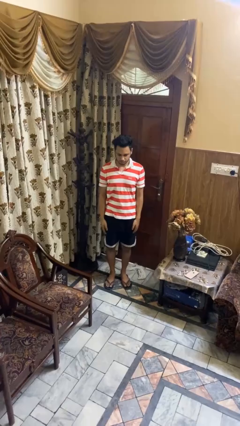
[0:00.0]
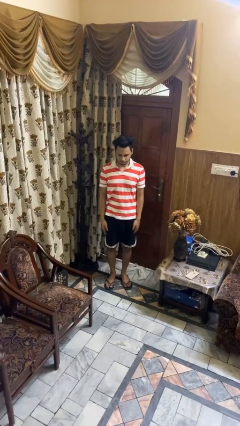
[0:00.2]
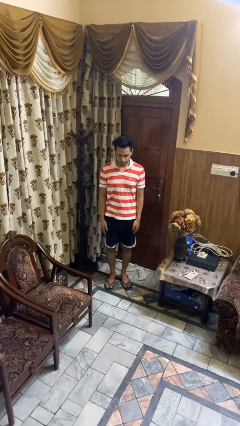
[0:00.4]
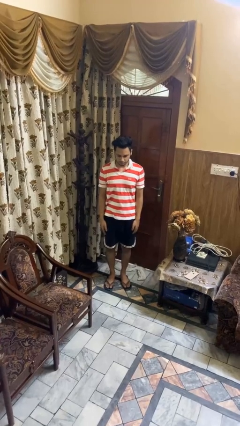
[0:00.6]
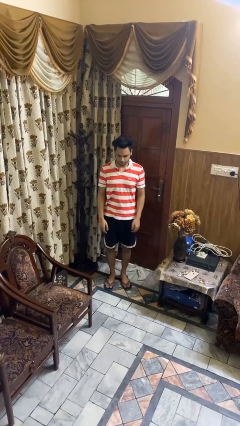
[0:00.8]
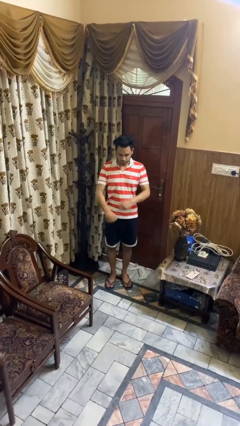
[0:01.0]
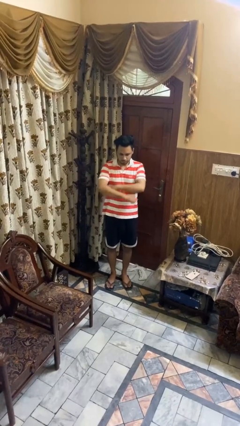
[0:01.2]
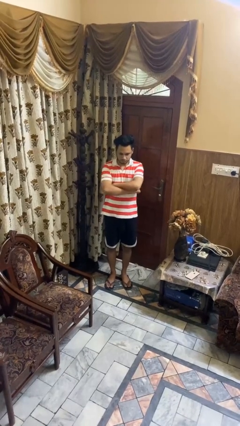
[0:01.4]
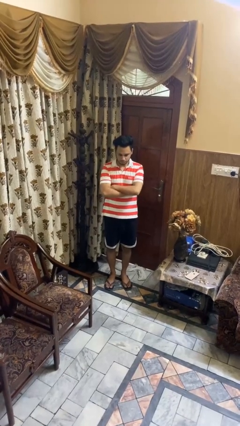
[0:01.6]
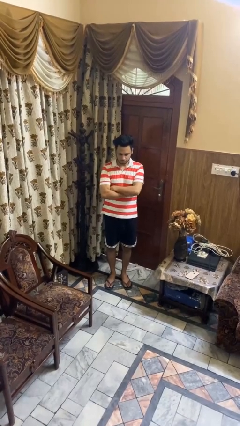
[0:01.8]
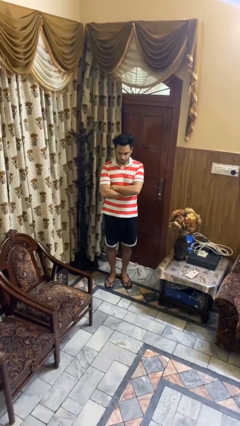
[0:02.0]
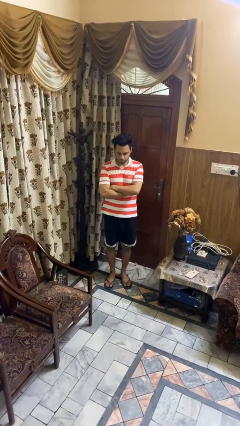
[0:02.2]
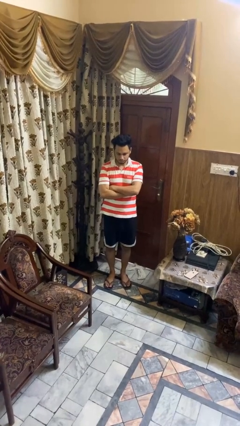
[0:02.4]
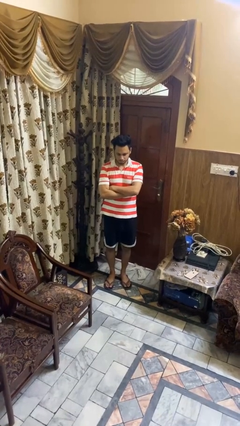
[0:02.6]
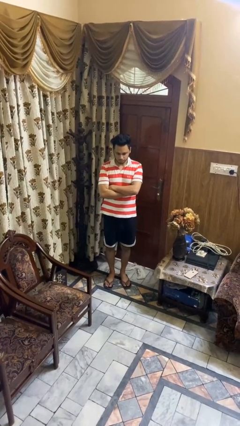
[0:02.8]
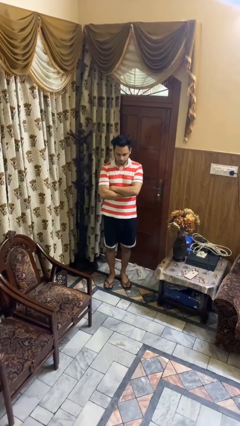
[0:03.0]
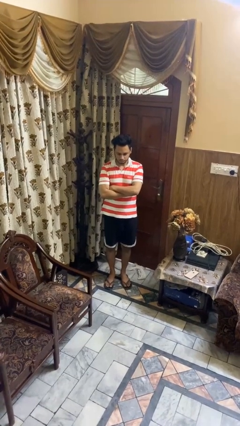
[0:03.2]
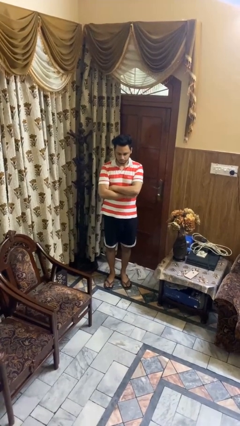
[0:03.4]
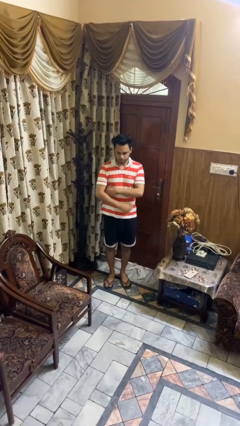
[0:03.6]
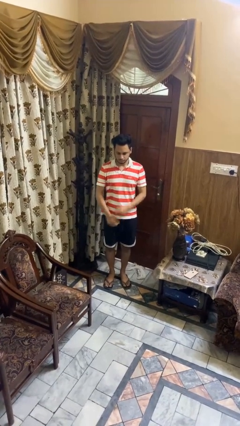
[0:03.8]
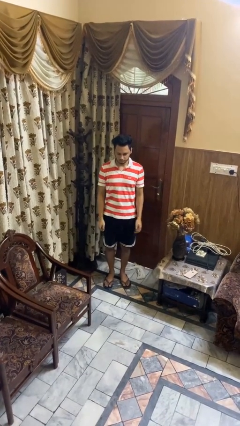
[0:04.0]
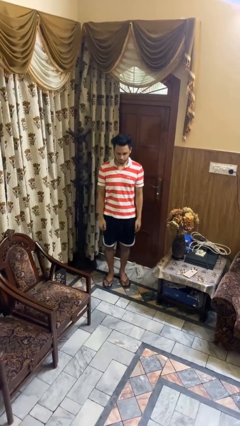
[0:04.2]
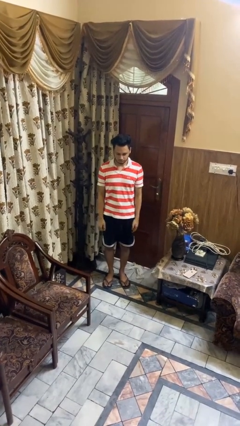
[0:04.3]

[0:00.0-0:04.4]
person crosses arms

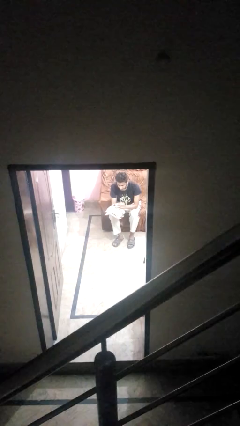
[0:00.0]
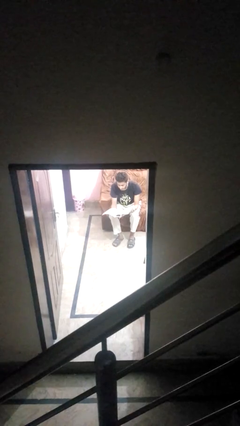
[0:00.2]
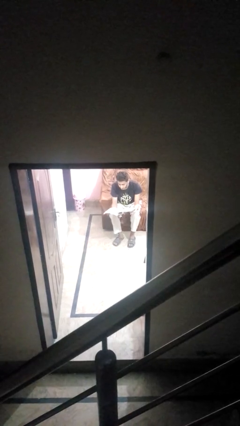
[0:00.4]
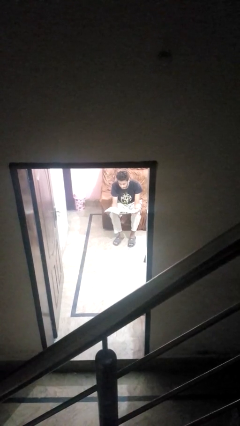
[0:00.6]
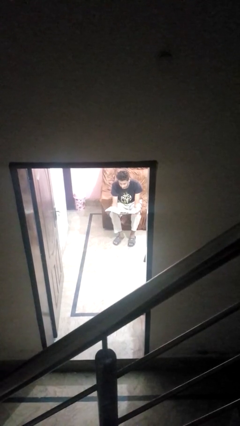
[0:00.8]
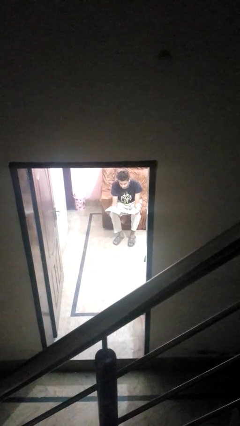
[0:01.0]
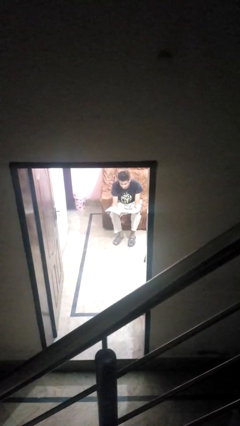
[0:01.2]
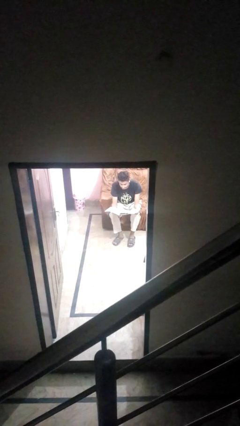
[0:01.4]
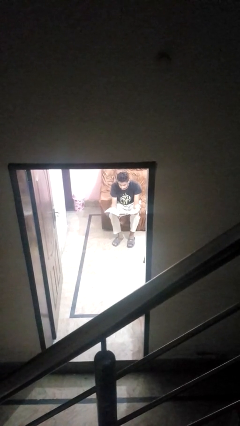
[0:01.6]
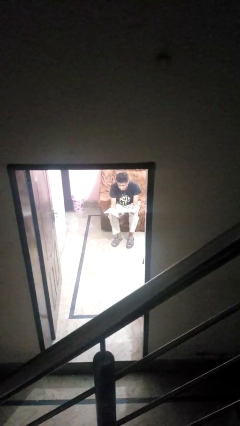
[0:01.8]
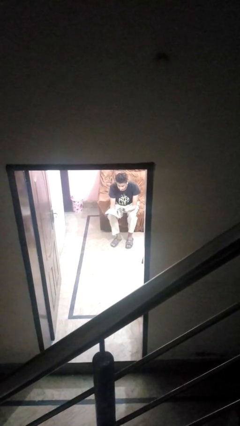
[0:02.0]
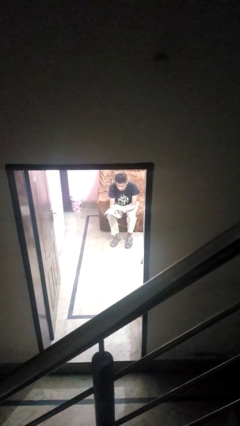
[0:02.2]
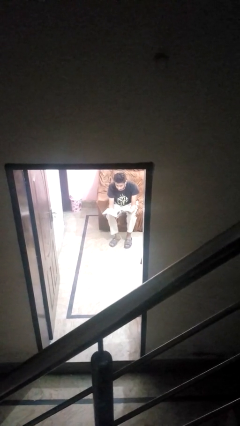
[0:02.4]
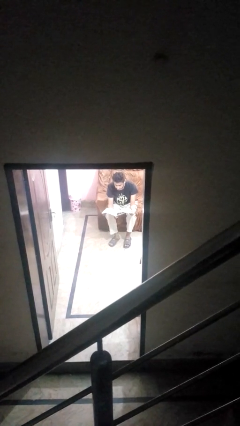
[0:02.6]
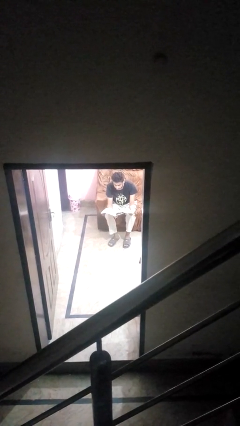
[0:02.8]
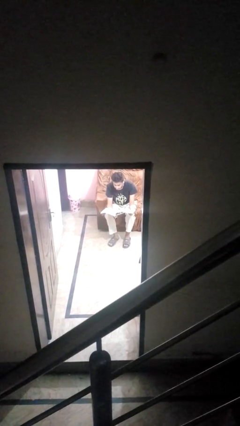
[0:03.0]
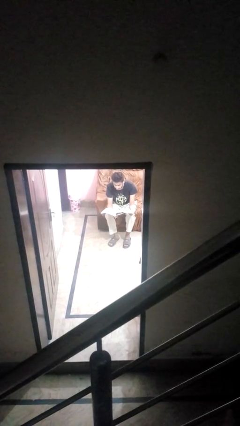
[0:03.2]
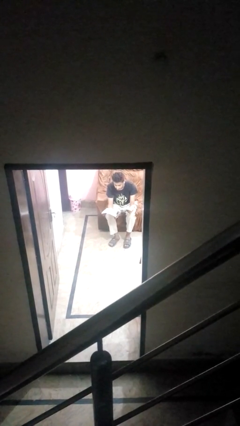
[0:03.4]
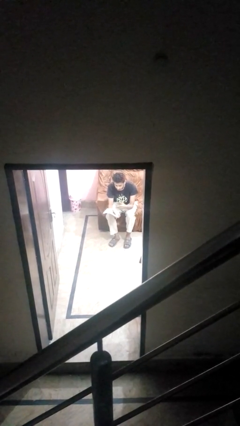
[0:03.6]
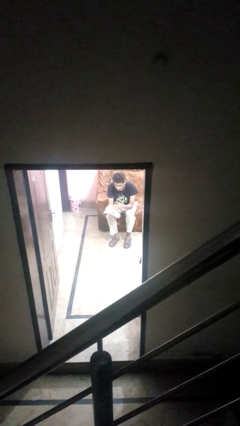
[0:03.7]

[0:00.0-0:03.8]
person reads magazine

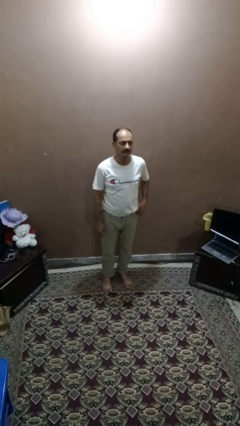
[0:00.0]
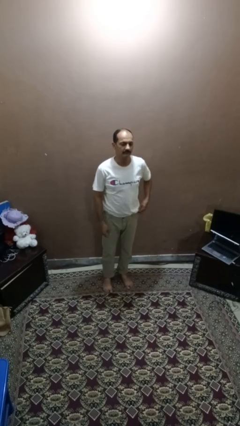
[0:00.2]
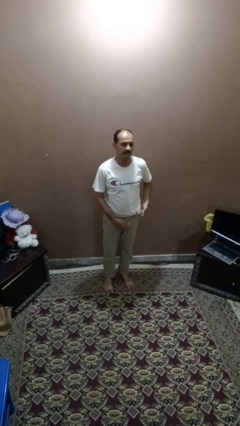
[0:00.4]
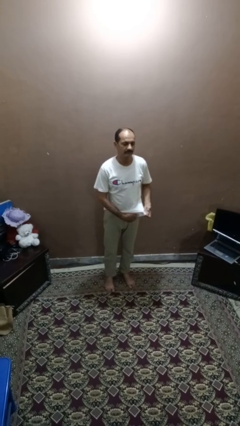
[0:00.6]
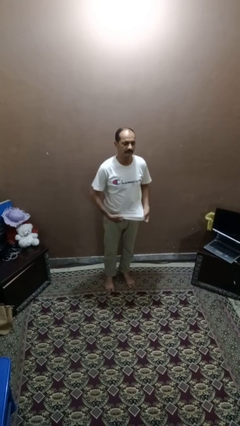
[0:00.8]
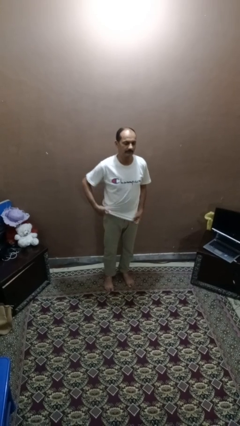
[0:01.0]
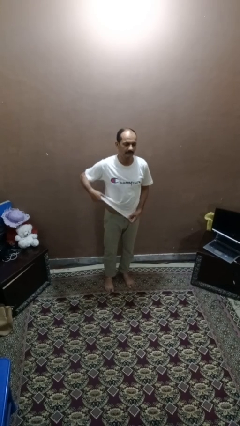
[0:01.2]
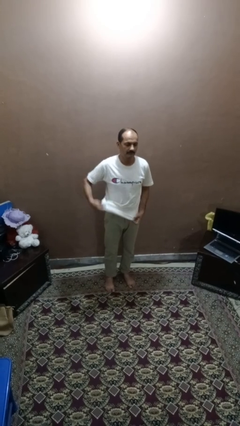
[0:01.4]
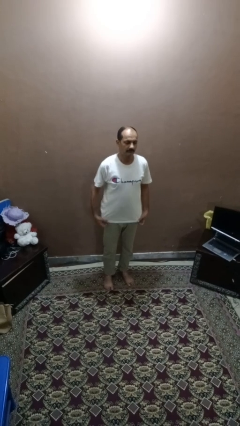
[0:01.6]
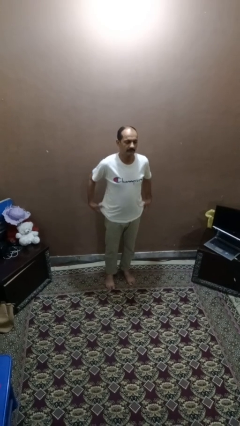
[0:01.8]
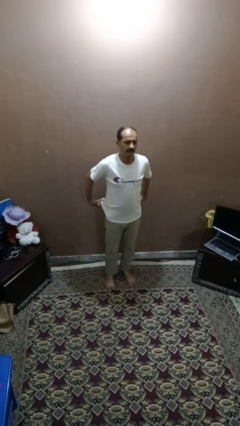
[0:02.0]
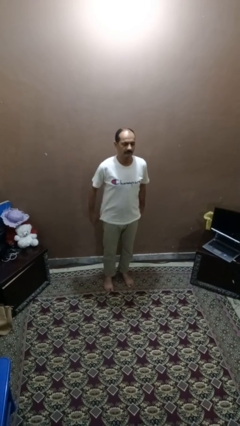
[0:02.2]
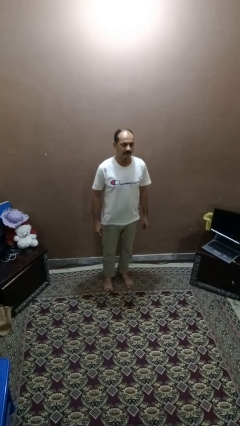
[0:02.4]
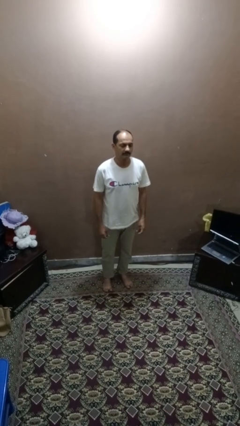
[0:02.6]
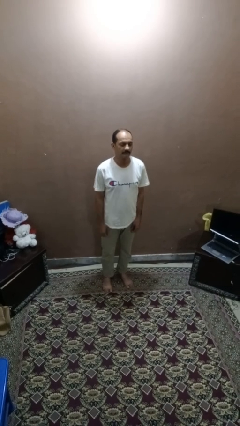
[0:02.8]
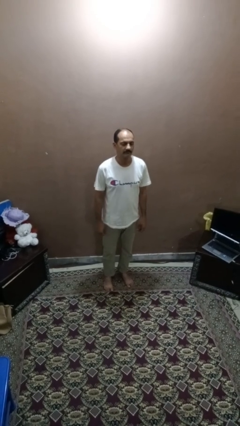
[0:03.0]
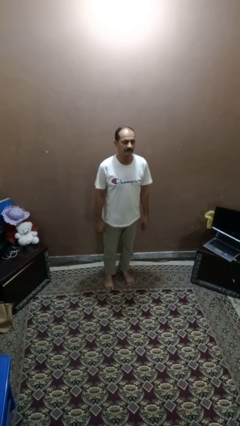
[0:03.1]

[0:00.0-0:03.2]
person untucks shirt

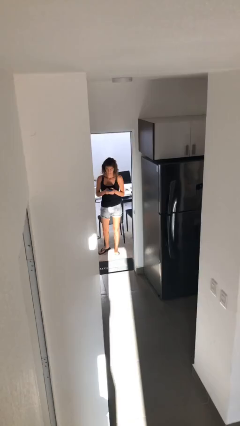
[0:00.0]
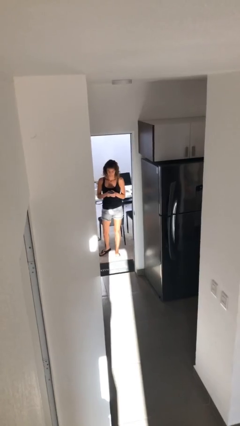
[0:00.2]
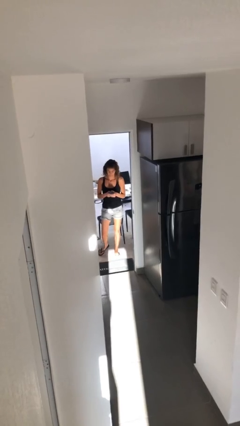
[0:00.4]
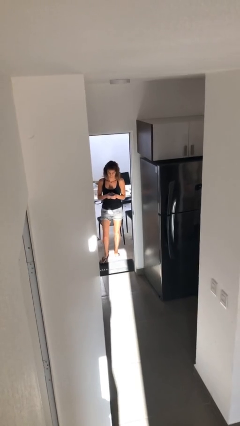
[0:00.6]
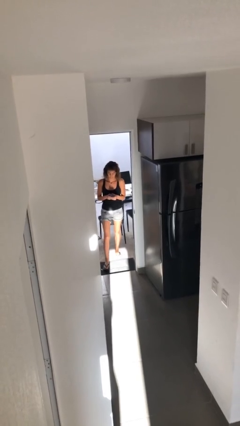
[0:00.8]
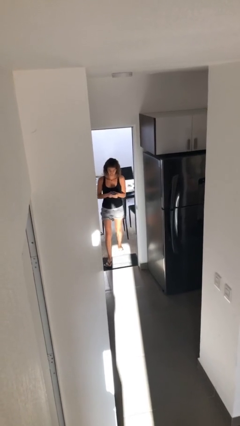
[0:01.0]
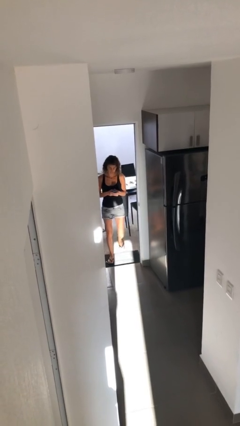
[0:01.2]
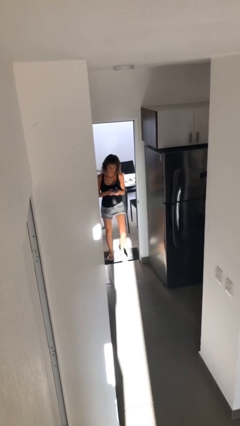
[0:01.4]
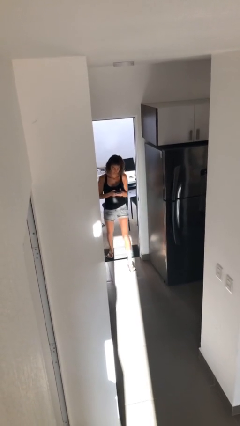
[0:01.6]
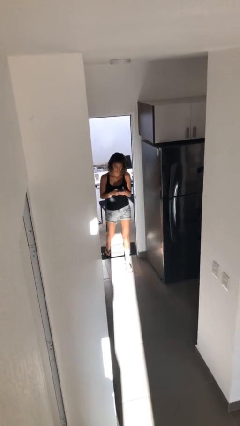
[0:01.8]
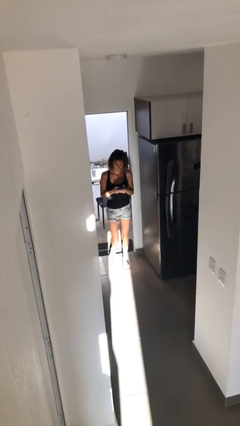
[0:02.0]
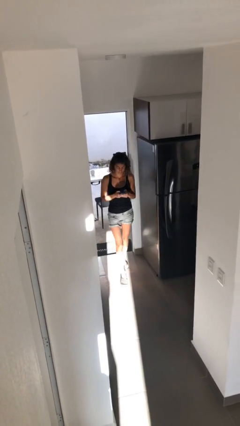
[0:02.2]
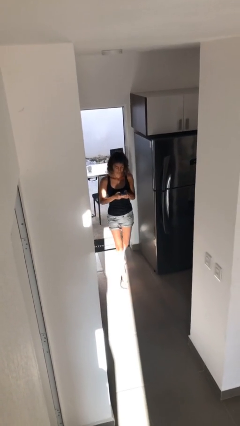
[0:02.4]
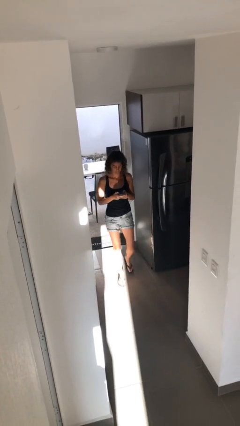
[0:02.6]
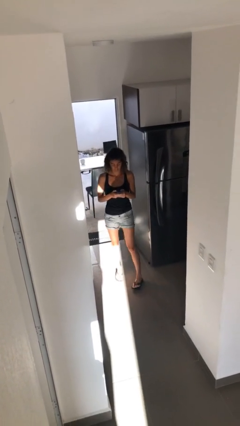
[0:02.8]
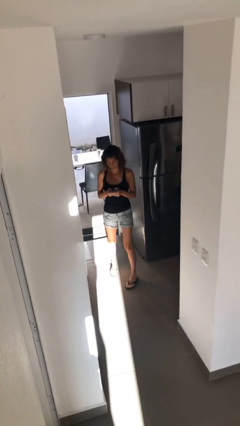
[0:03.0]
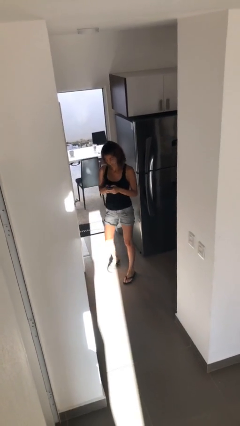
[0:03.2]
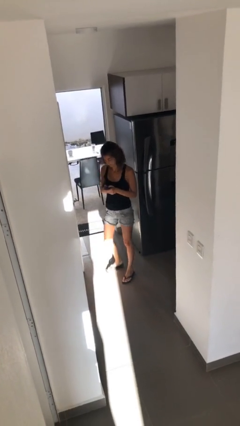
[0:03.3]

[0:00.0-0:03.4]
person enters scene through structure

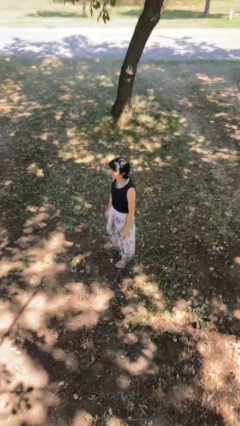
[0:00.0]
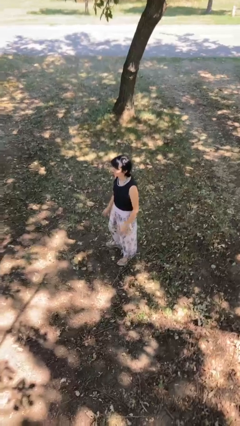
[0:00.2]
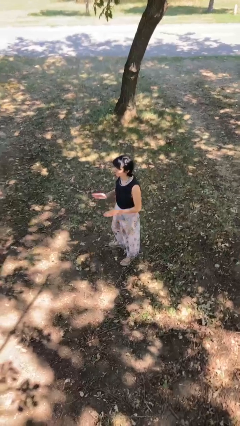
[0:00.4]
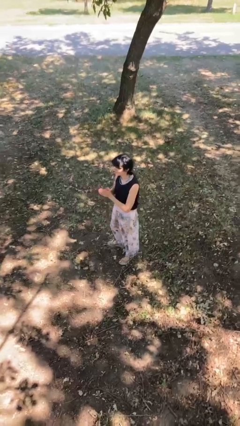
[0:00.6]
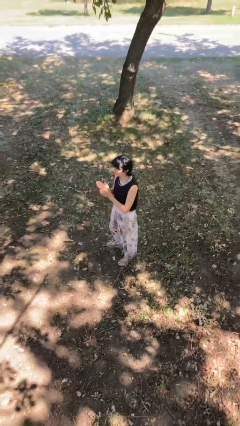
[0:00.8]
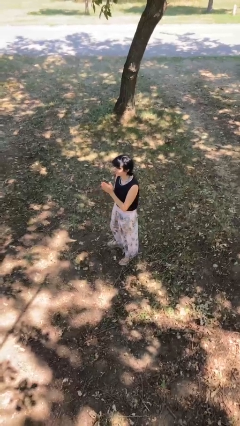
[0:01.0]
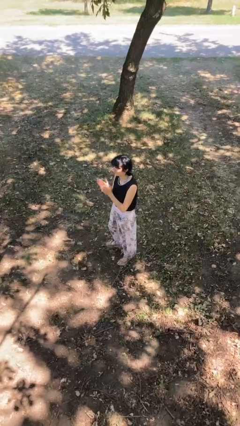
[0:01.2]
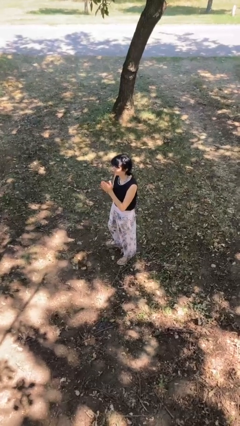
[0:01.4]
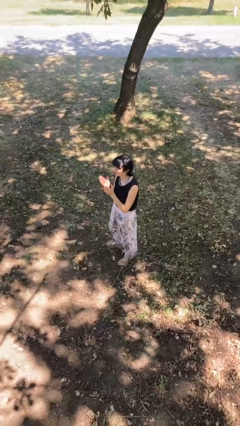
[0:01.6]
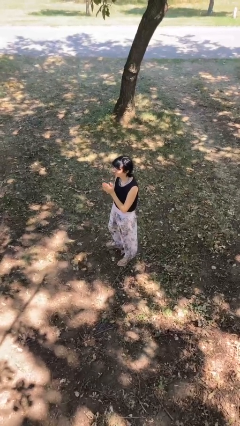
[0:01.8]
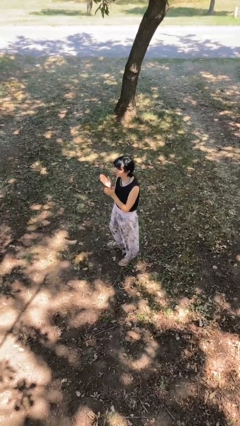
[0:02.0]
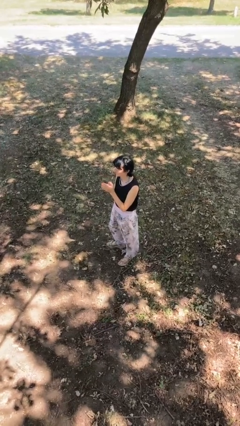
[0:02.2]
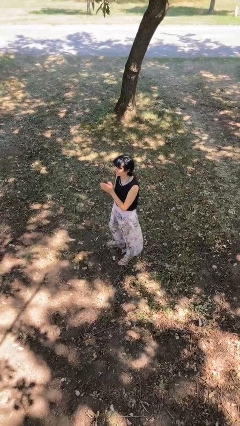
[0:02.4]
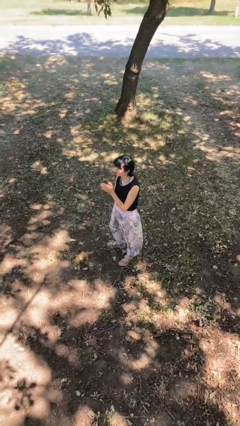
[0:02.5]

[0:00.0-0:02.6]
person claps hands

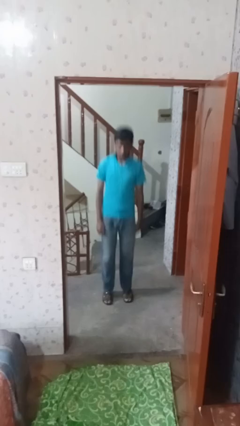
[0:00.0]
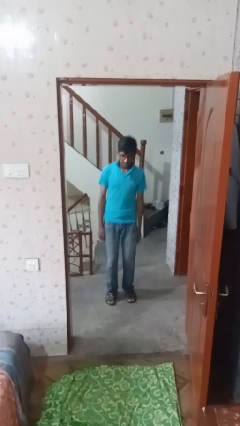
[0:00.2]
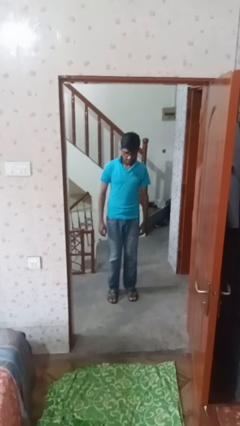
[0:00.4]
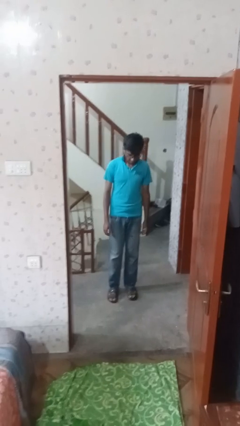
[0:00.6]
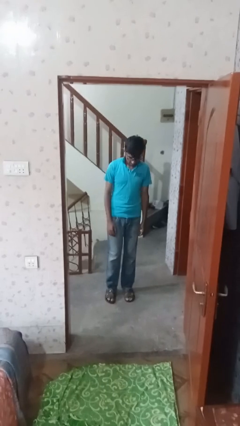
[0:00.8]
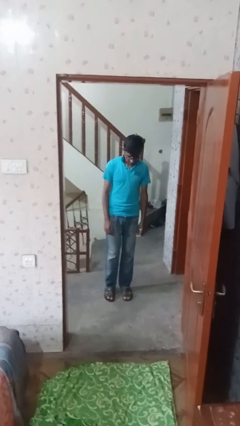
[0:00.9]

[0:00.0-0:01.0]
person jumps
